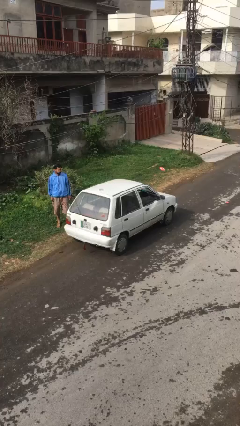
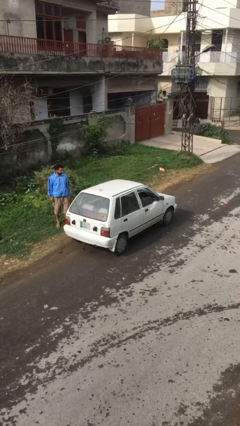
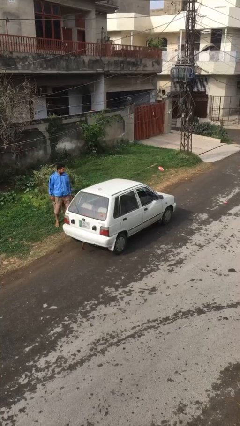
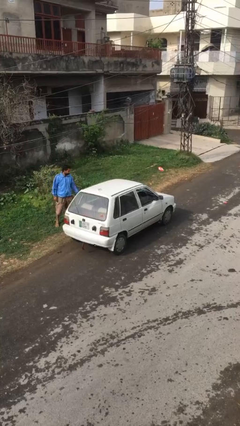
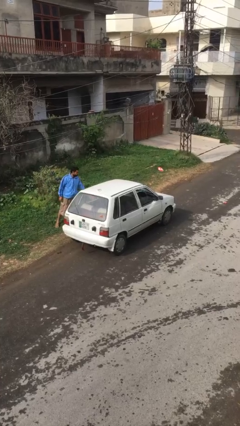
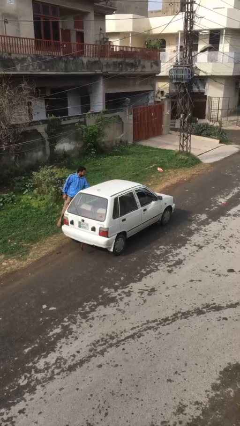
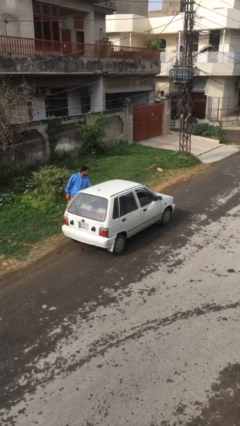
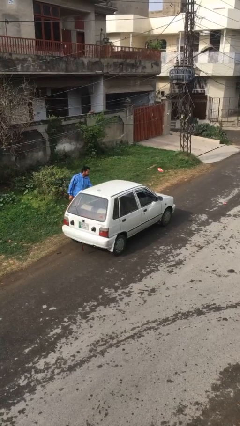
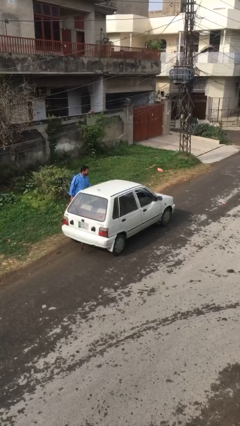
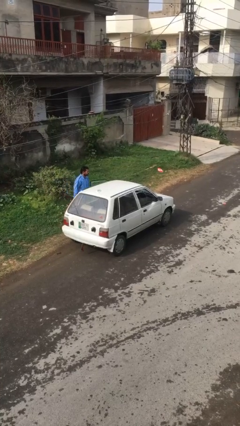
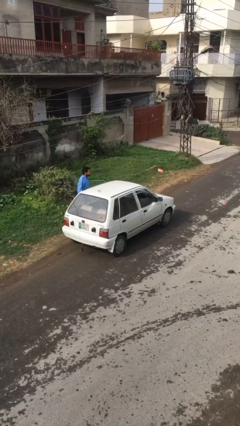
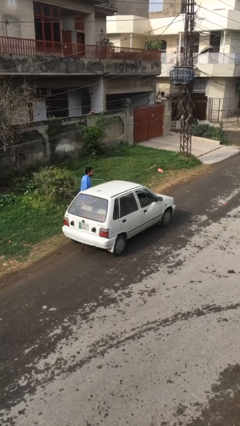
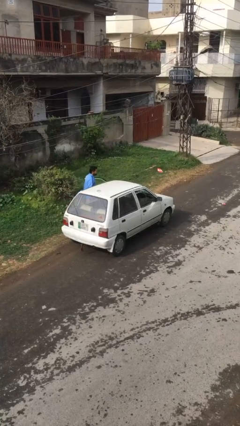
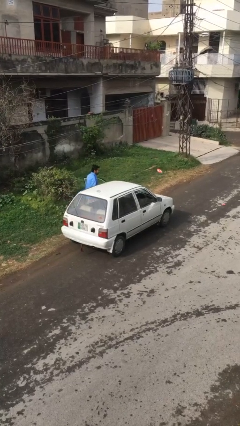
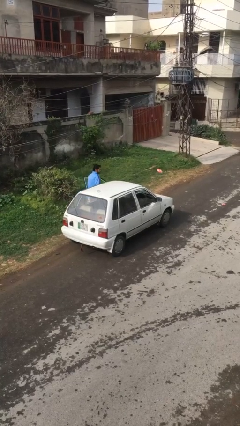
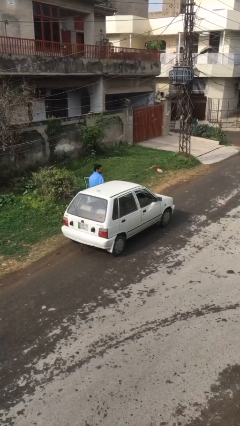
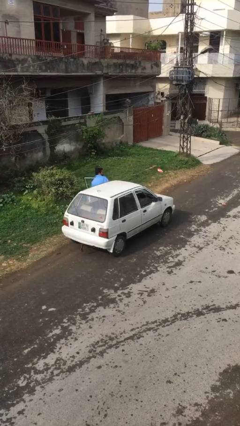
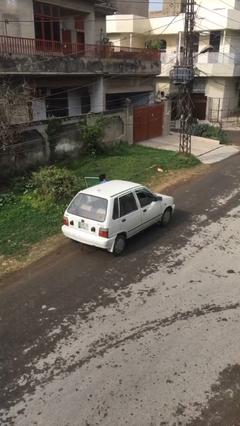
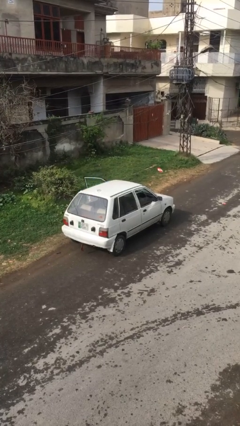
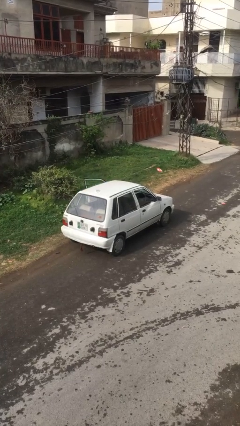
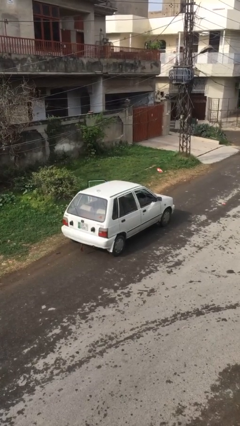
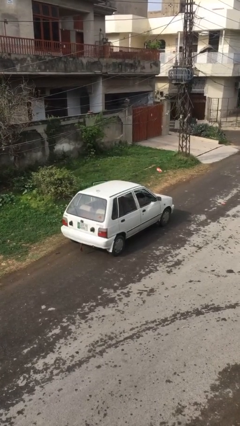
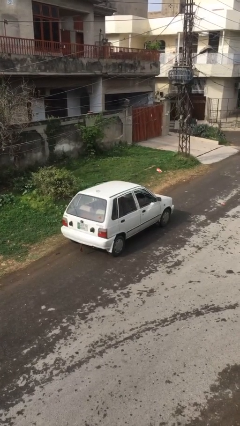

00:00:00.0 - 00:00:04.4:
car picks up person

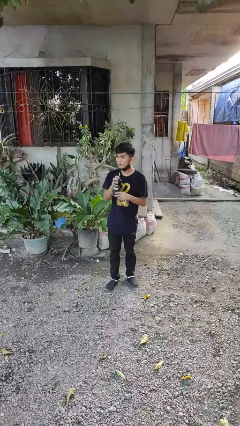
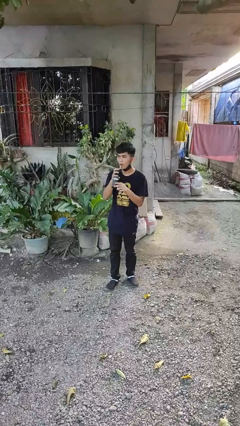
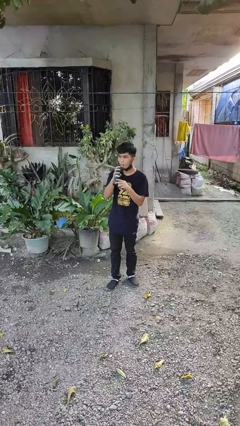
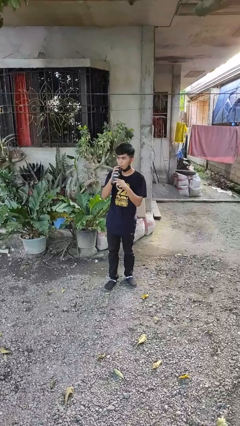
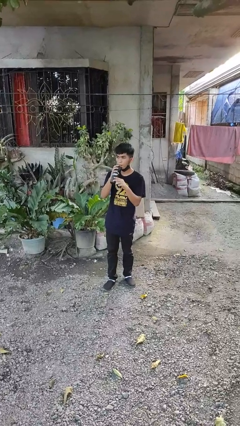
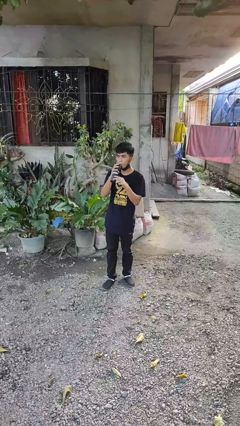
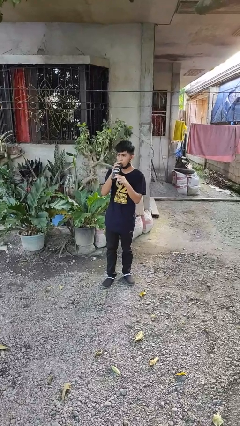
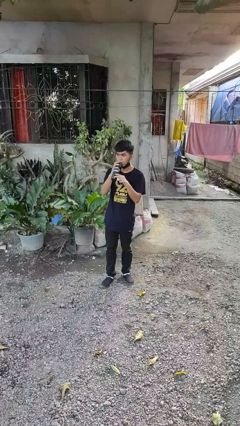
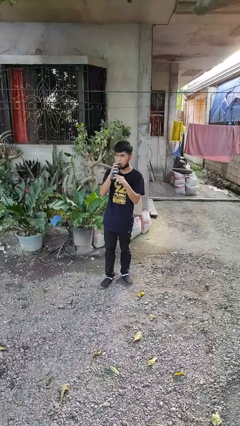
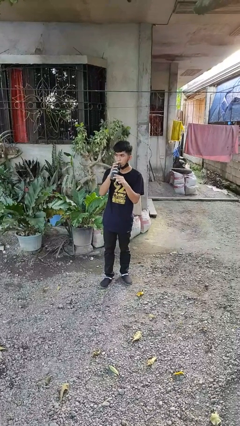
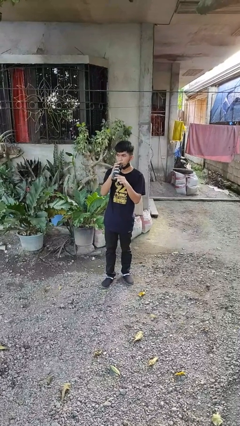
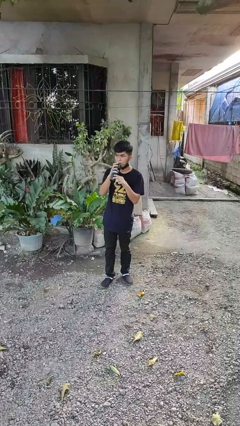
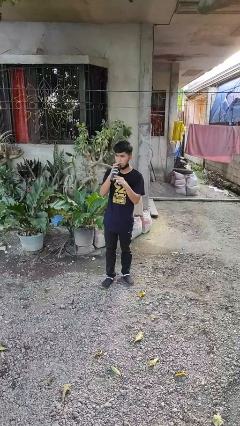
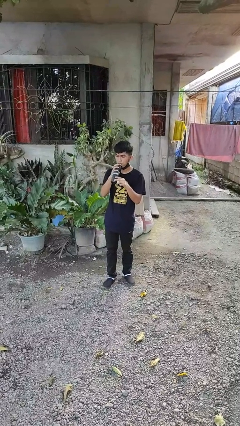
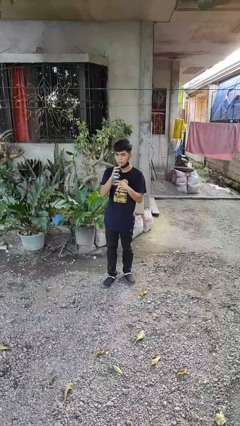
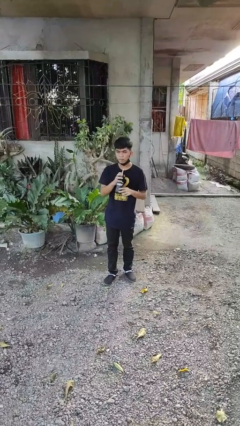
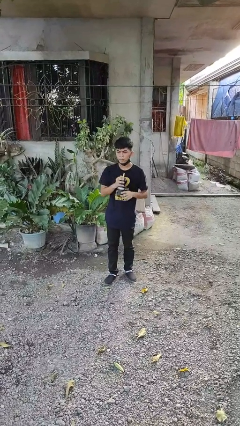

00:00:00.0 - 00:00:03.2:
person drinks from straw

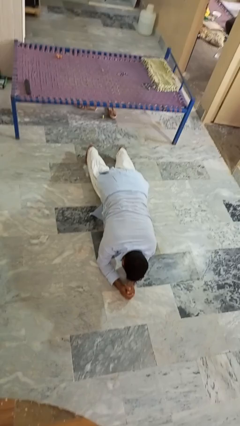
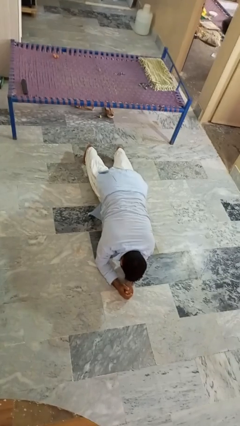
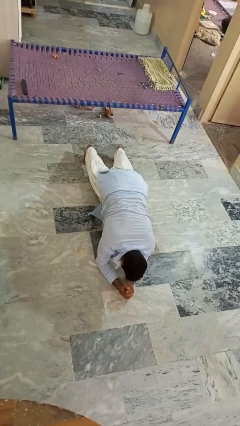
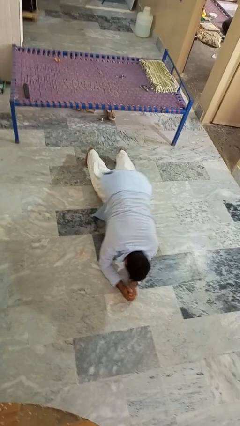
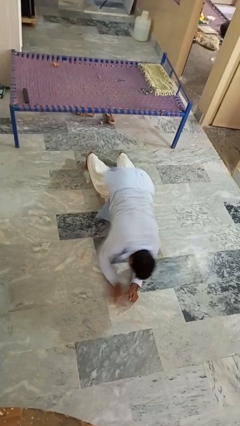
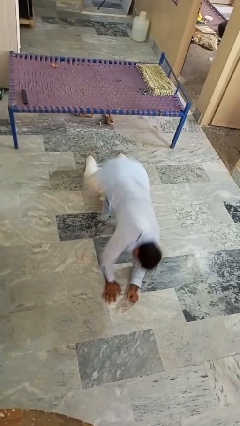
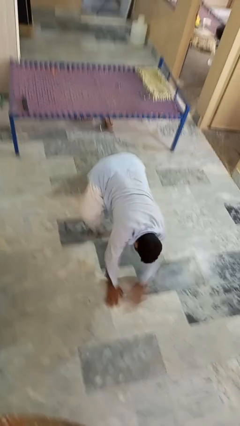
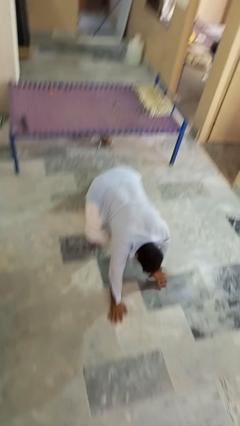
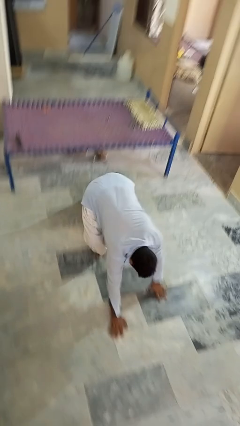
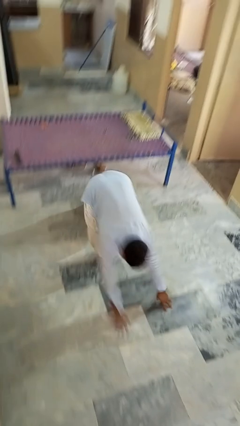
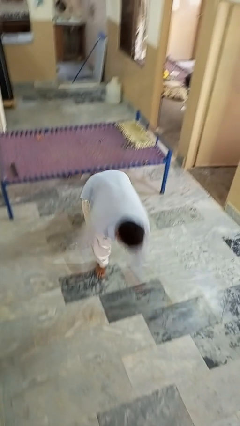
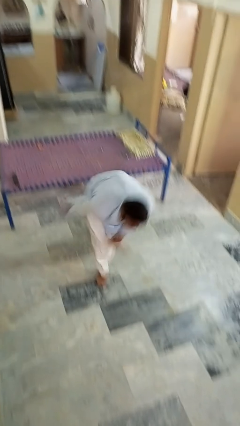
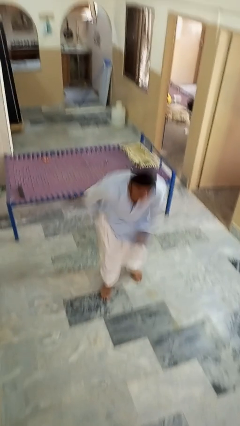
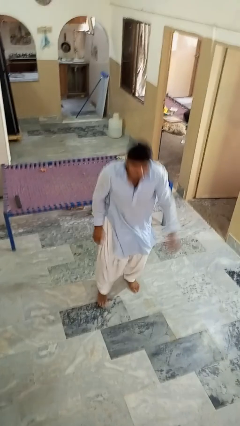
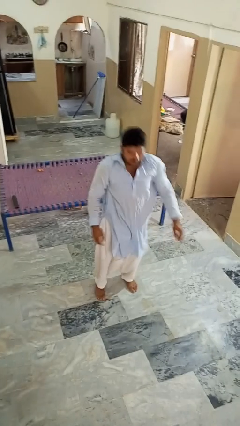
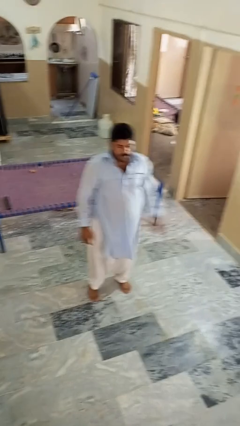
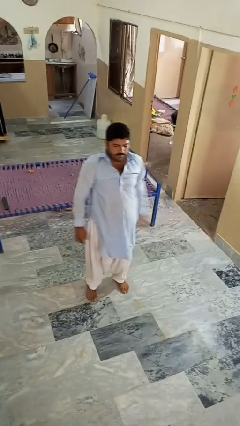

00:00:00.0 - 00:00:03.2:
person stands up from floor

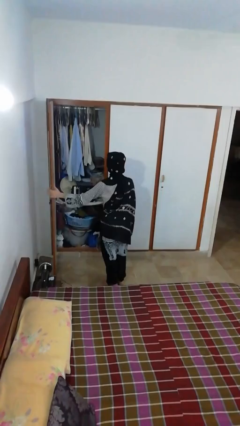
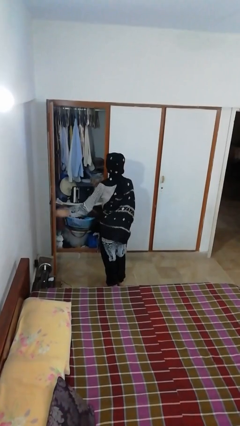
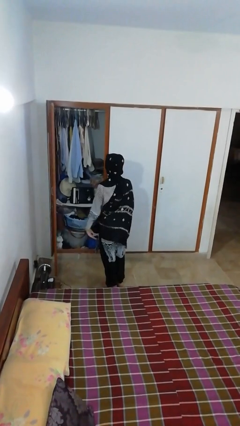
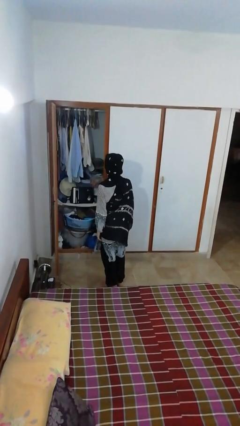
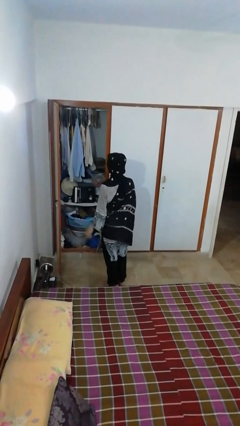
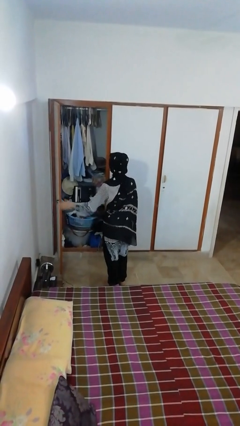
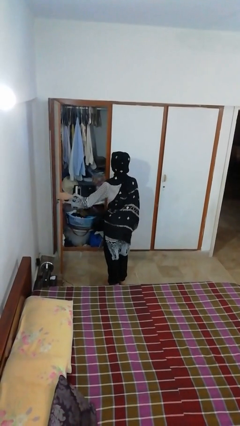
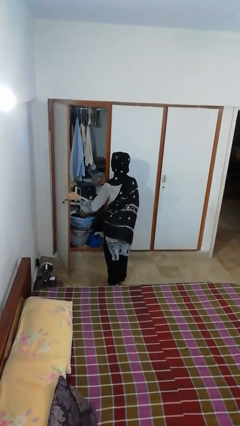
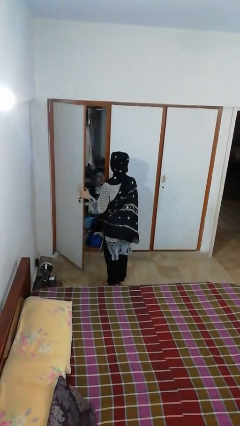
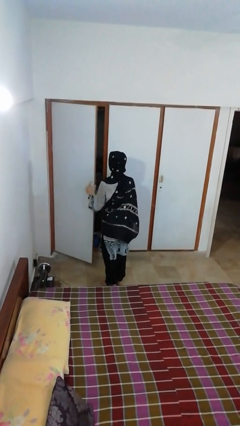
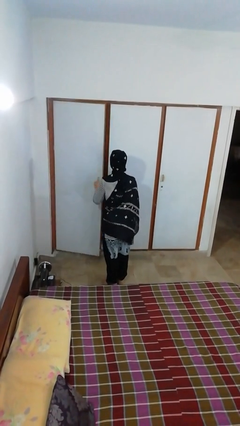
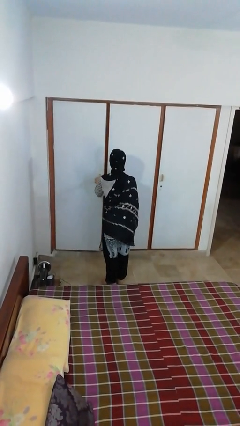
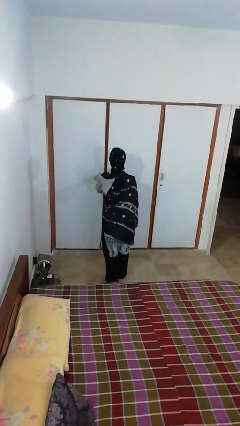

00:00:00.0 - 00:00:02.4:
person closes closet door

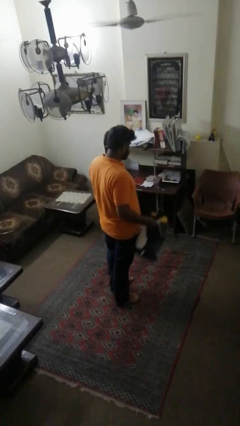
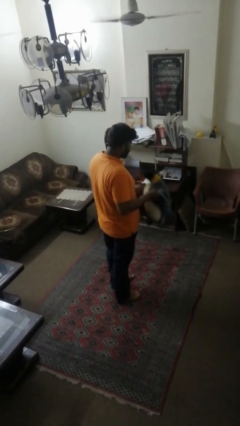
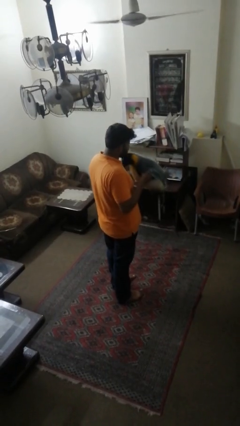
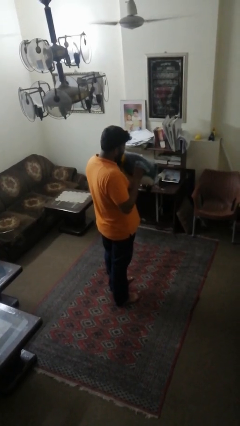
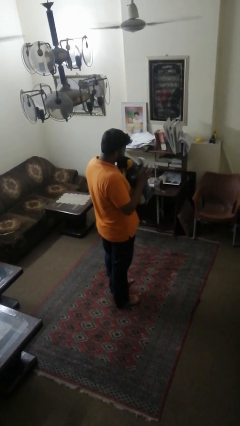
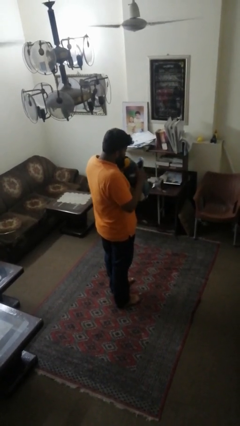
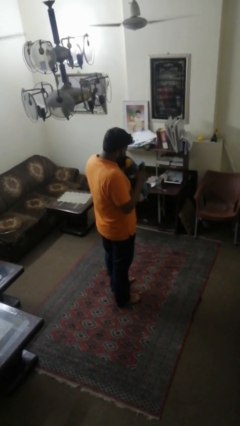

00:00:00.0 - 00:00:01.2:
person hugs stuffed animal

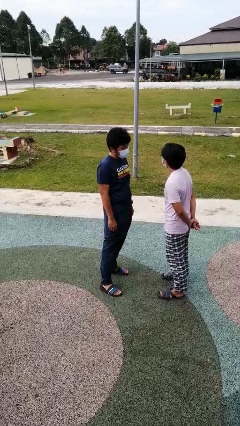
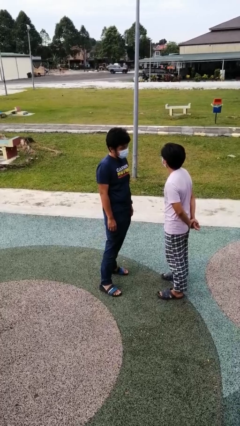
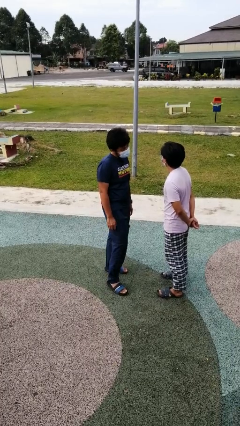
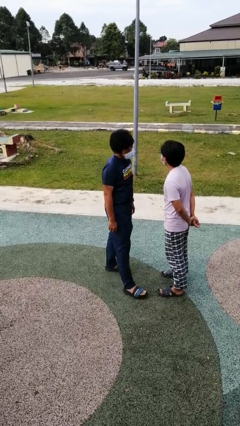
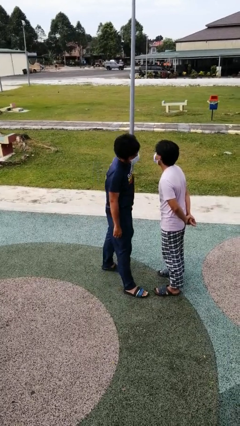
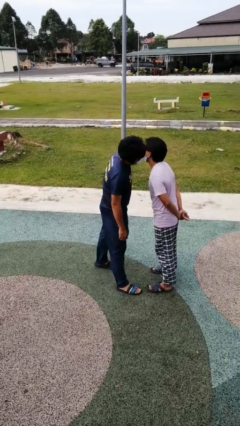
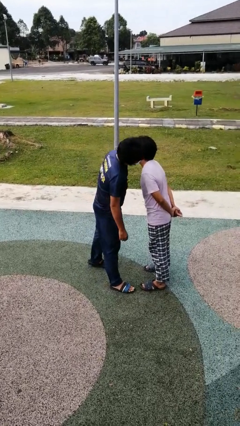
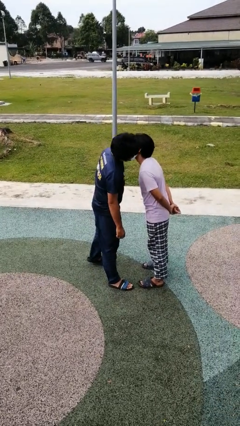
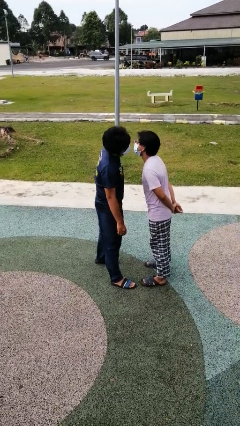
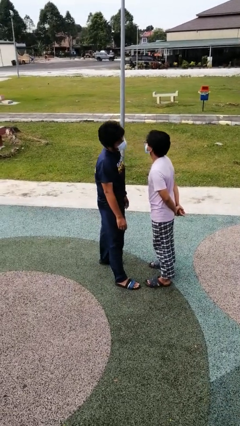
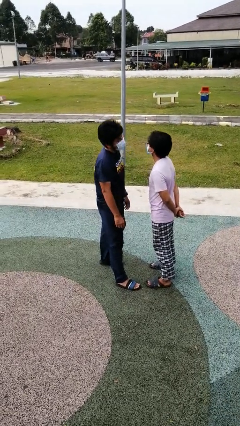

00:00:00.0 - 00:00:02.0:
person kisses cheek of person

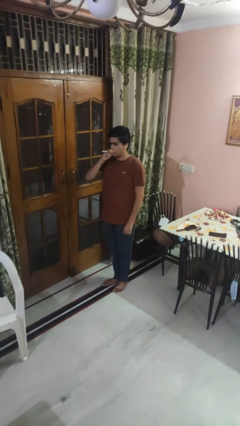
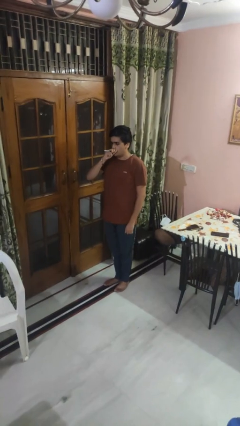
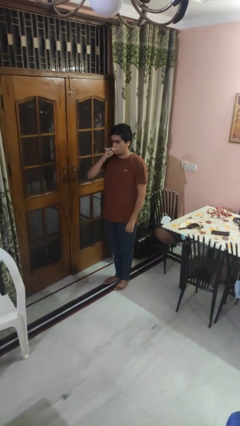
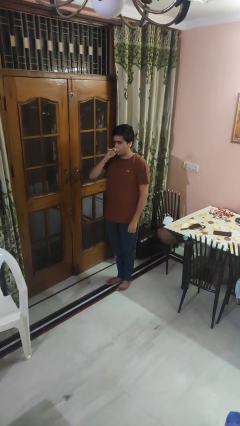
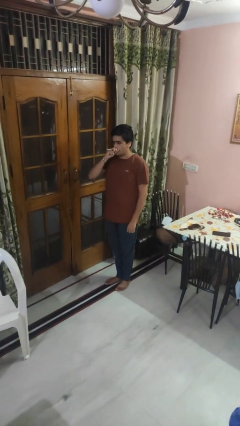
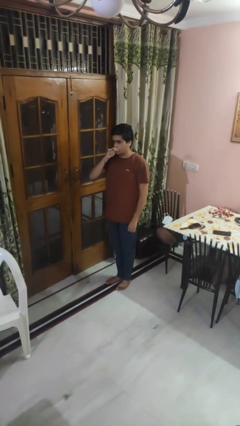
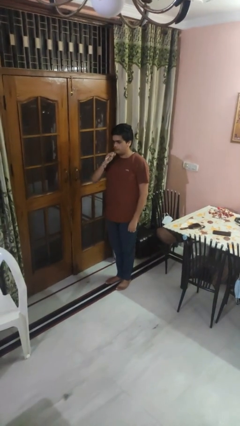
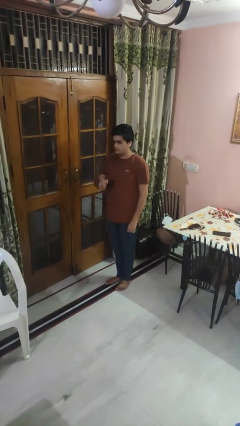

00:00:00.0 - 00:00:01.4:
person vapes
